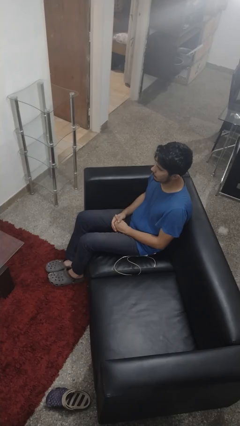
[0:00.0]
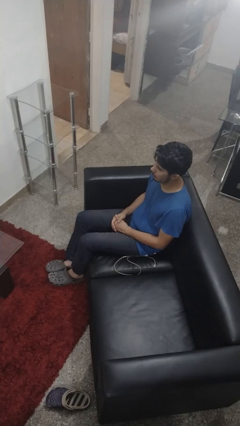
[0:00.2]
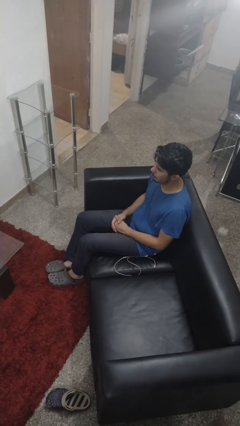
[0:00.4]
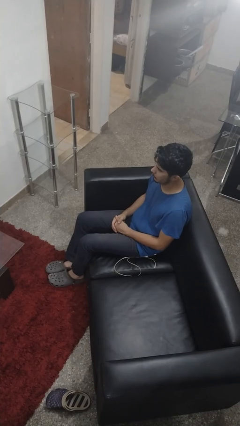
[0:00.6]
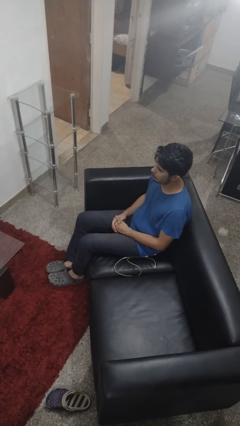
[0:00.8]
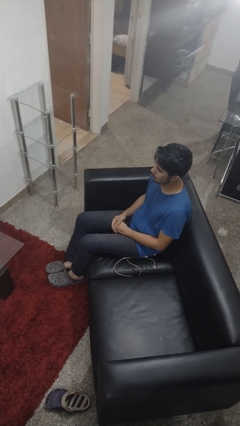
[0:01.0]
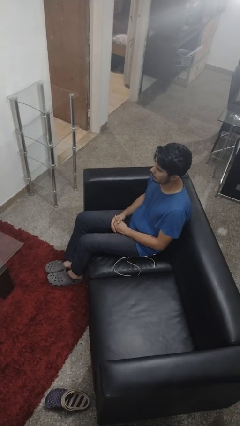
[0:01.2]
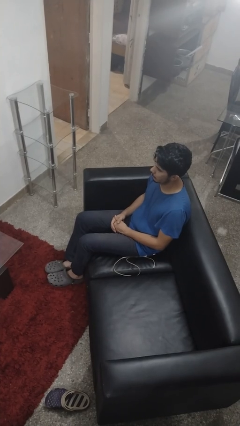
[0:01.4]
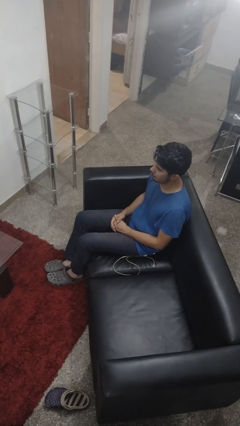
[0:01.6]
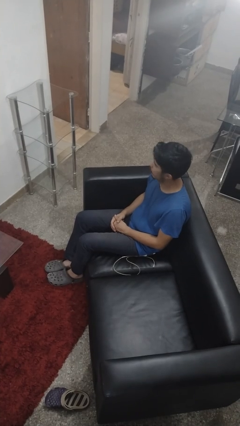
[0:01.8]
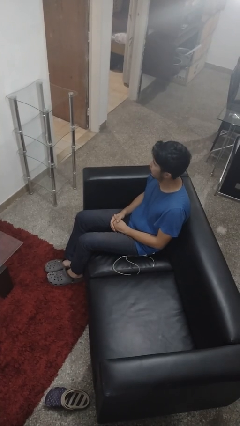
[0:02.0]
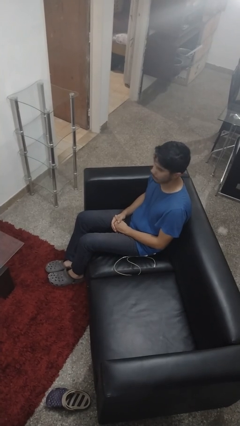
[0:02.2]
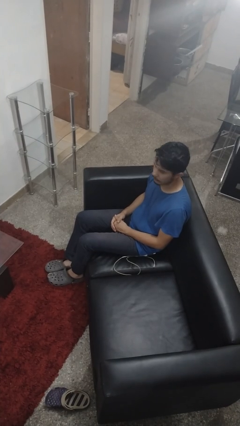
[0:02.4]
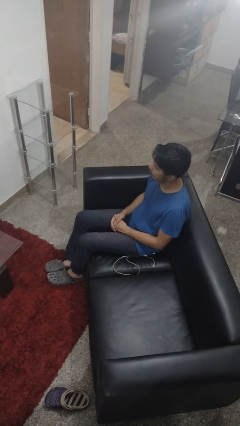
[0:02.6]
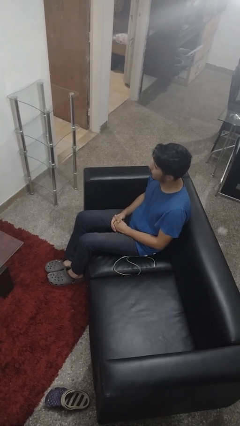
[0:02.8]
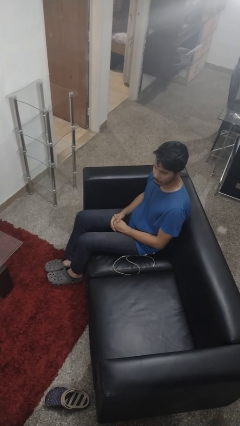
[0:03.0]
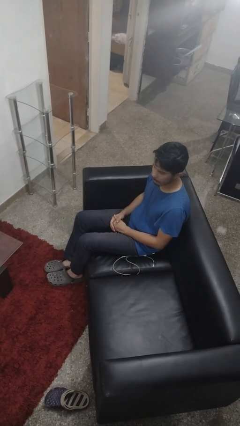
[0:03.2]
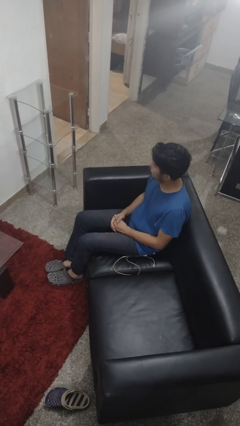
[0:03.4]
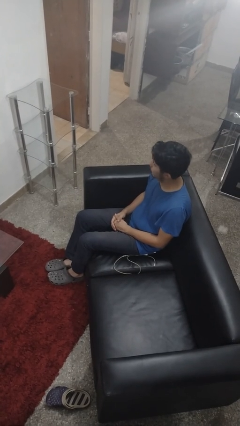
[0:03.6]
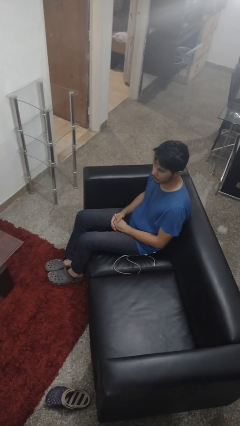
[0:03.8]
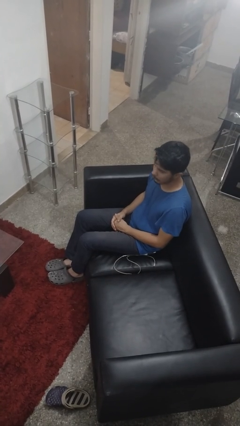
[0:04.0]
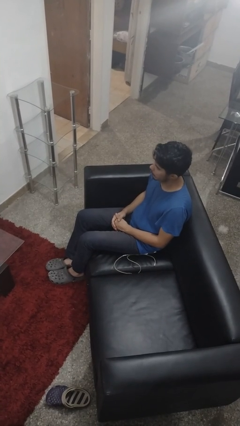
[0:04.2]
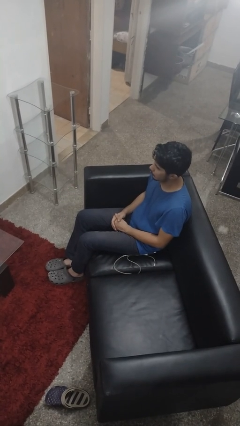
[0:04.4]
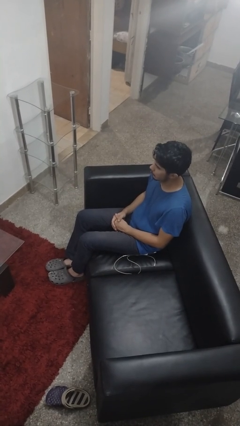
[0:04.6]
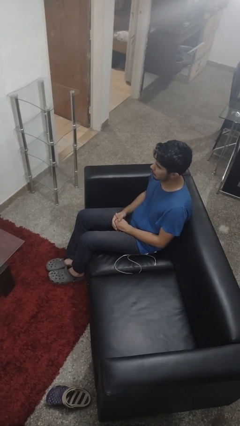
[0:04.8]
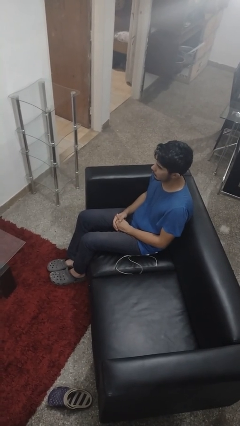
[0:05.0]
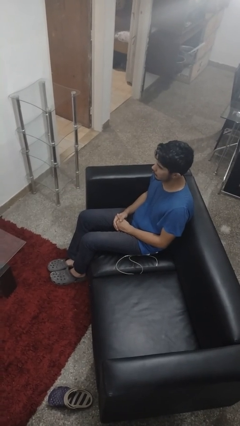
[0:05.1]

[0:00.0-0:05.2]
person shakes head

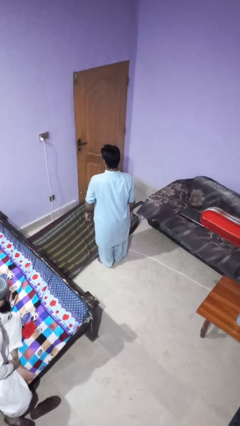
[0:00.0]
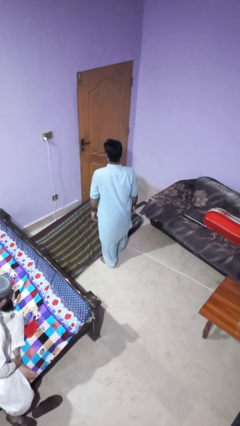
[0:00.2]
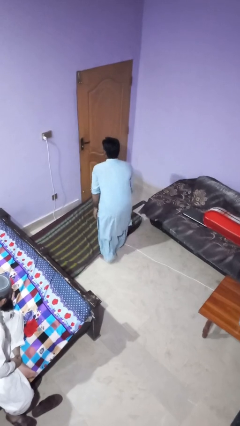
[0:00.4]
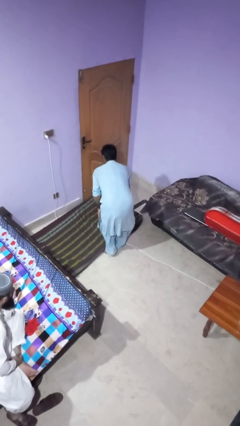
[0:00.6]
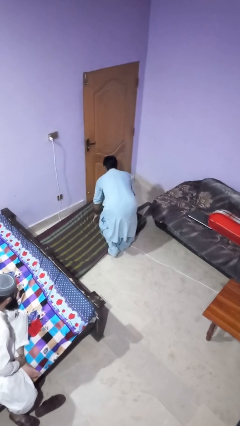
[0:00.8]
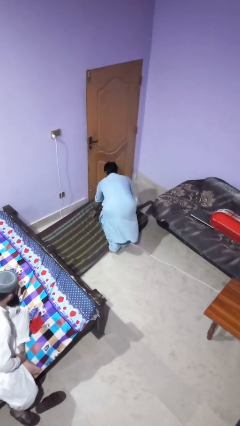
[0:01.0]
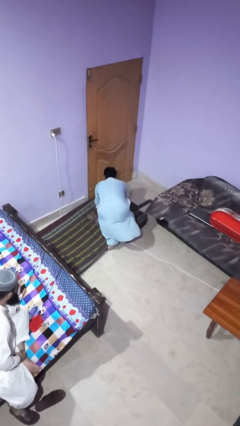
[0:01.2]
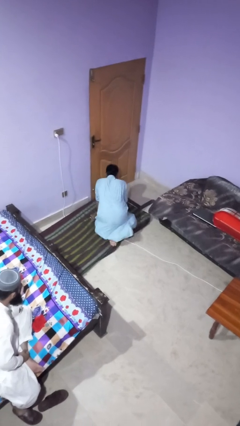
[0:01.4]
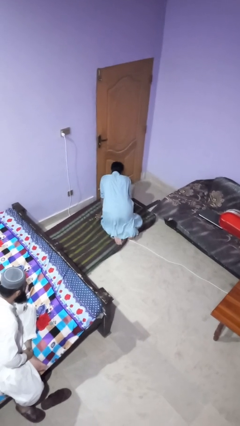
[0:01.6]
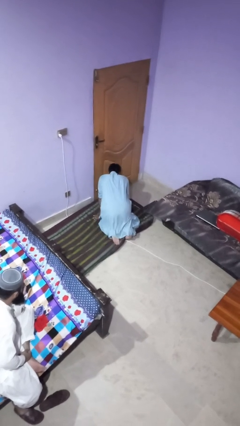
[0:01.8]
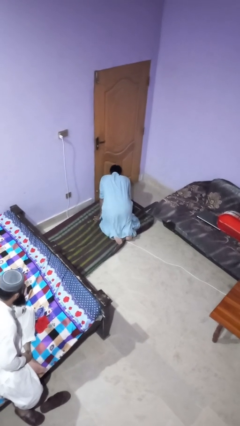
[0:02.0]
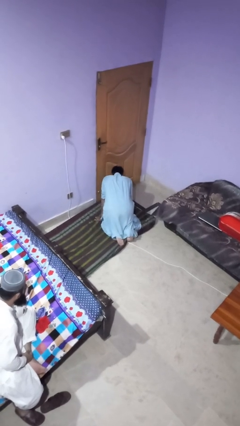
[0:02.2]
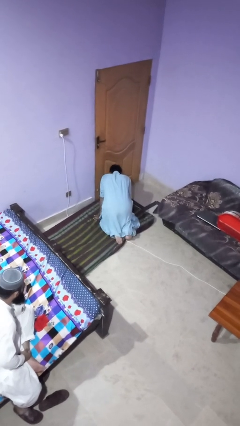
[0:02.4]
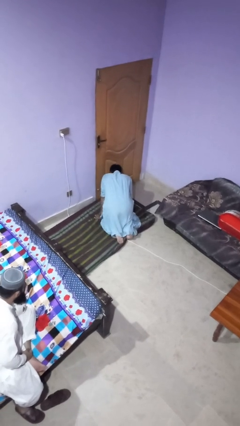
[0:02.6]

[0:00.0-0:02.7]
person trips on object on floor

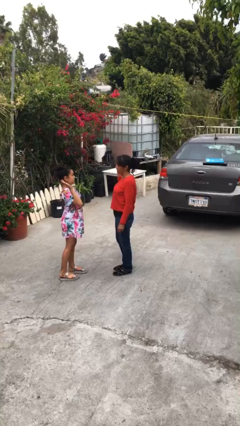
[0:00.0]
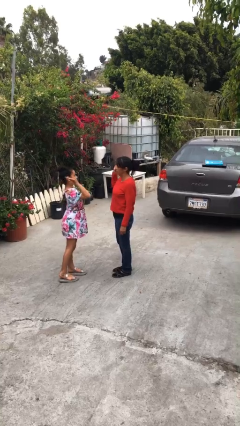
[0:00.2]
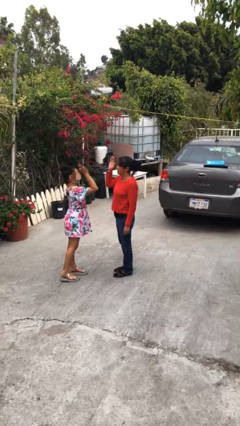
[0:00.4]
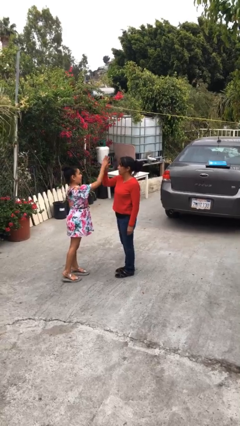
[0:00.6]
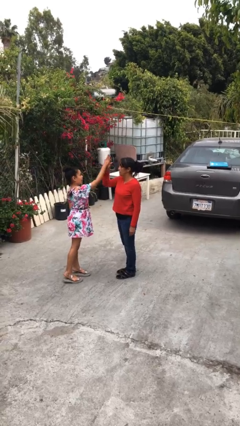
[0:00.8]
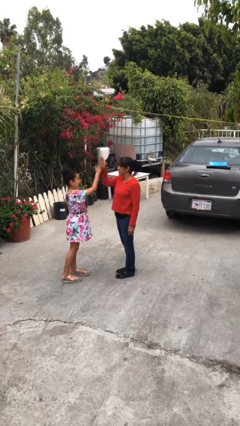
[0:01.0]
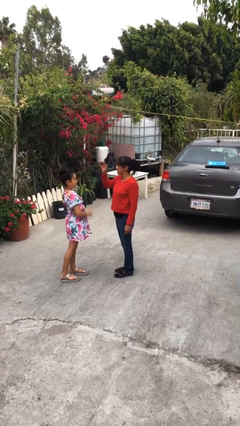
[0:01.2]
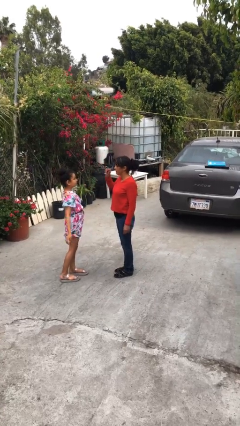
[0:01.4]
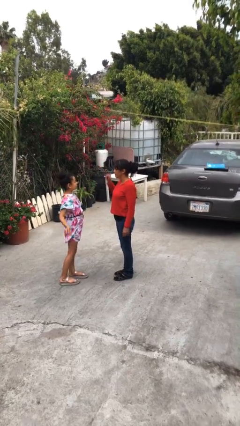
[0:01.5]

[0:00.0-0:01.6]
person highfives hand

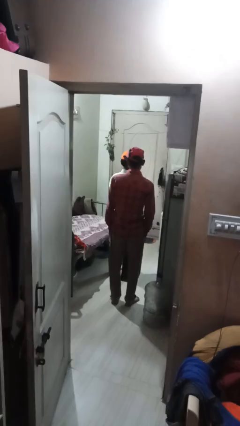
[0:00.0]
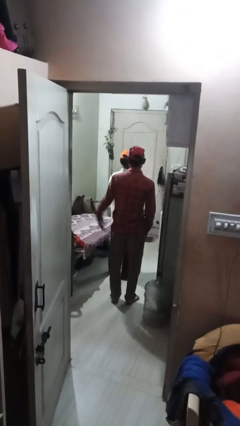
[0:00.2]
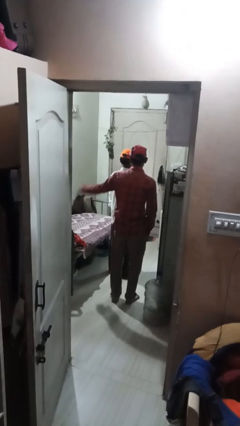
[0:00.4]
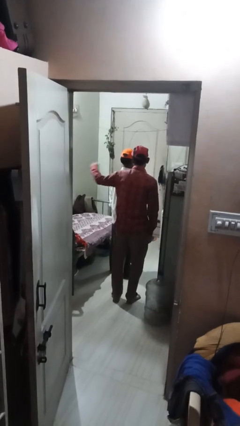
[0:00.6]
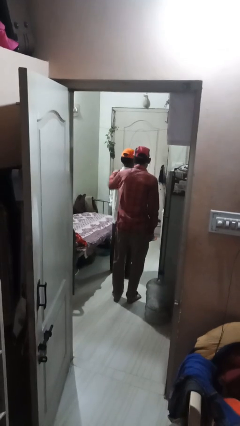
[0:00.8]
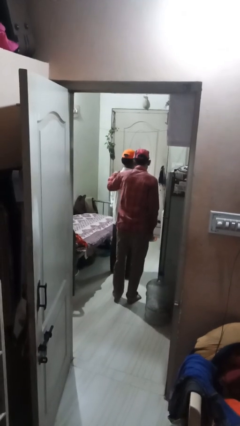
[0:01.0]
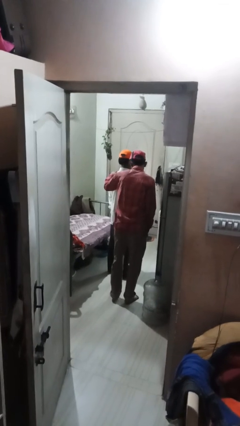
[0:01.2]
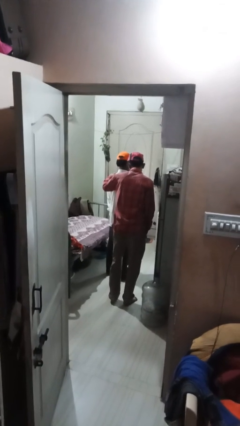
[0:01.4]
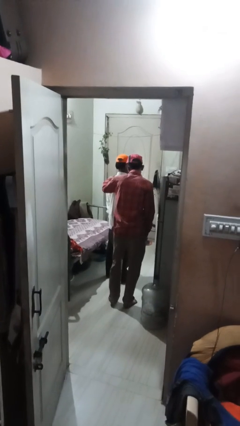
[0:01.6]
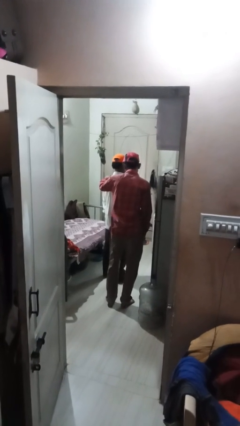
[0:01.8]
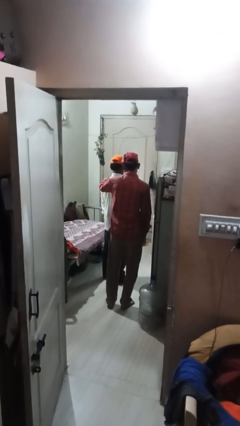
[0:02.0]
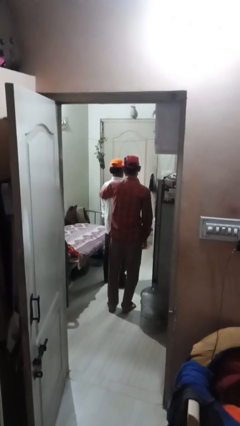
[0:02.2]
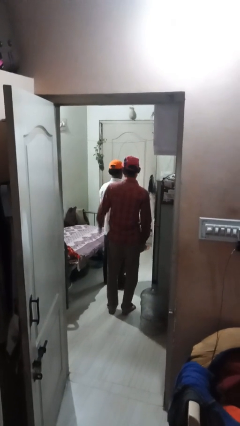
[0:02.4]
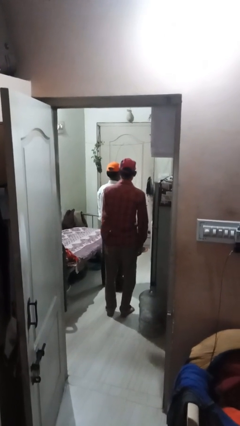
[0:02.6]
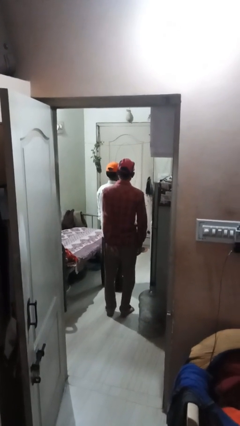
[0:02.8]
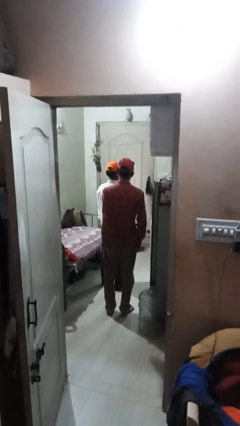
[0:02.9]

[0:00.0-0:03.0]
person touches back of person

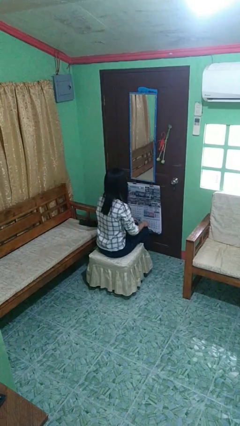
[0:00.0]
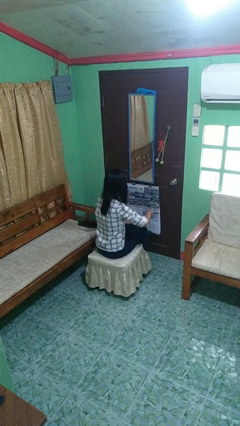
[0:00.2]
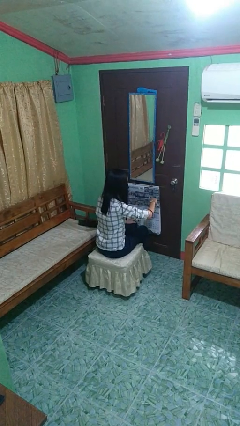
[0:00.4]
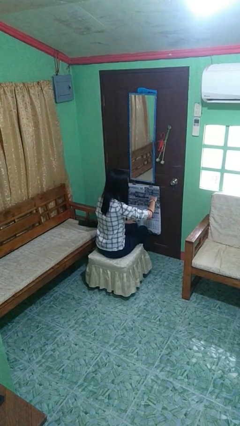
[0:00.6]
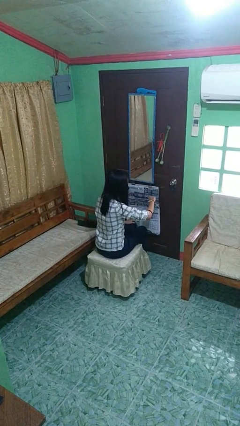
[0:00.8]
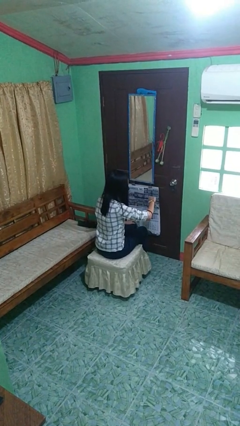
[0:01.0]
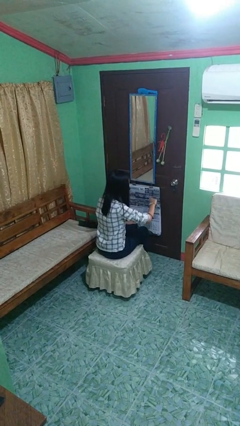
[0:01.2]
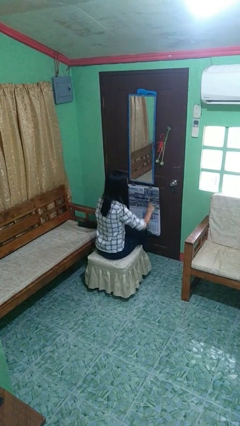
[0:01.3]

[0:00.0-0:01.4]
person looks at wristwatch

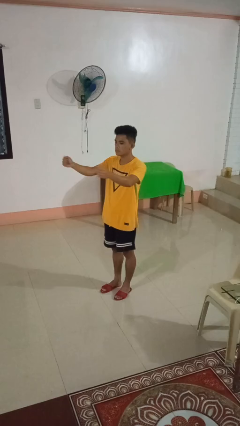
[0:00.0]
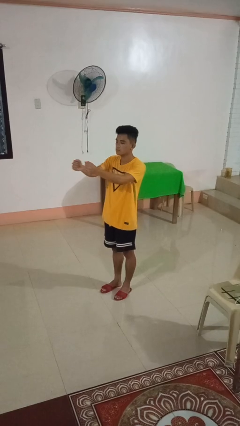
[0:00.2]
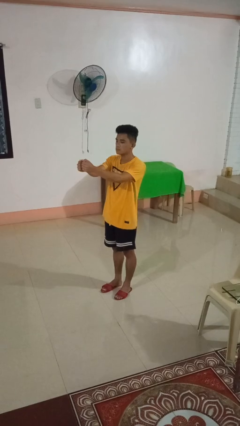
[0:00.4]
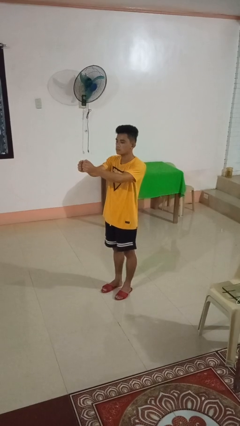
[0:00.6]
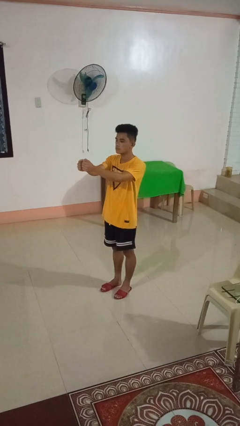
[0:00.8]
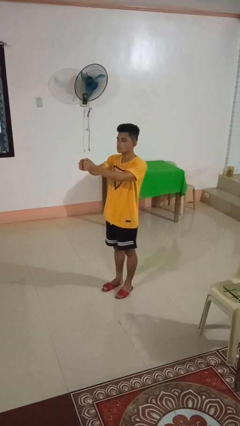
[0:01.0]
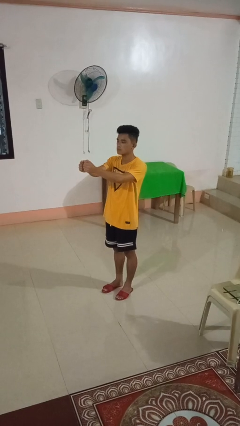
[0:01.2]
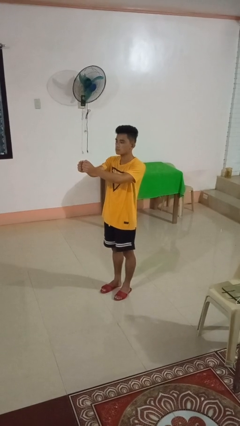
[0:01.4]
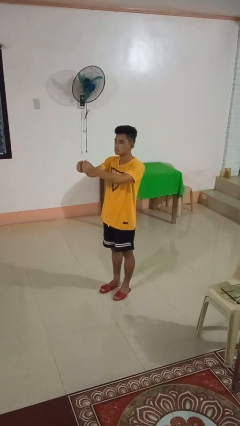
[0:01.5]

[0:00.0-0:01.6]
person gestures zoom in

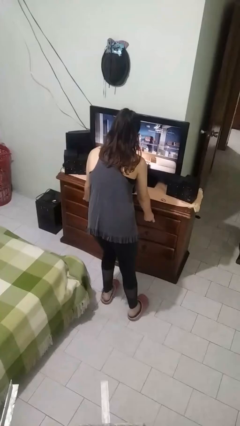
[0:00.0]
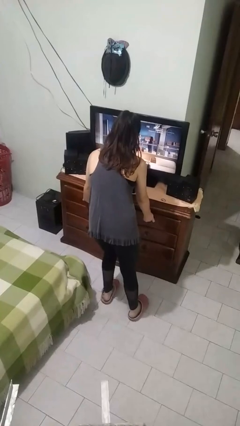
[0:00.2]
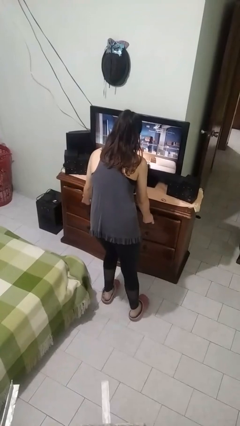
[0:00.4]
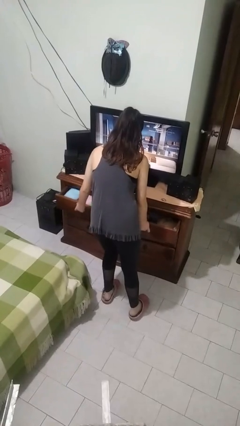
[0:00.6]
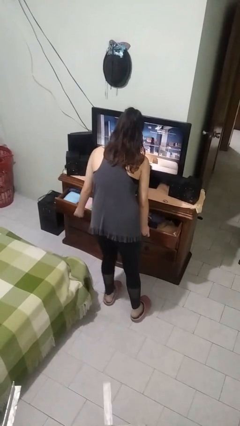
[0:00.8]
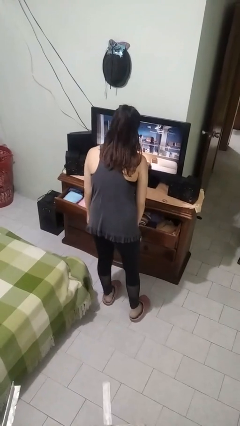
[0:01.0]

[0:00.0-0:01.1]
person opens dresser drawer

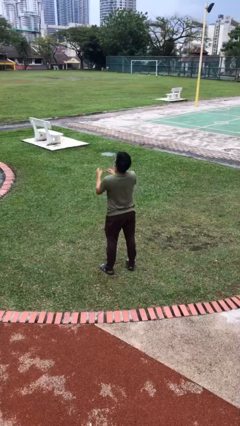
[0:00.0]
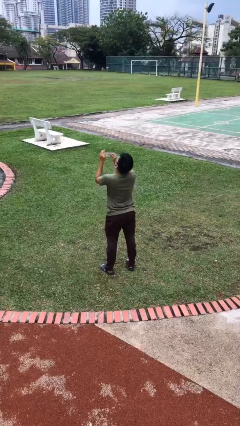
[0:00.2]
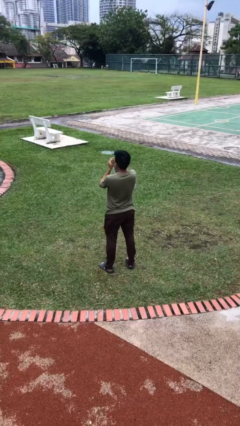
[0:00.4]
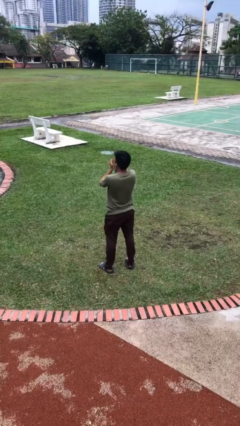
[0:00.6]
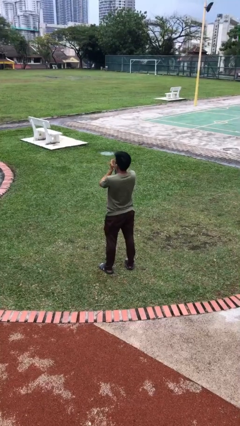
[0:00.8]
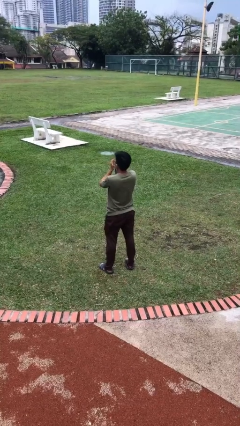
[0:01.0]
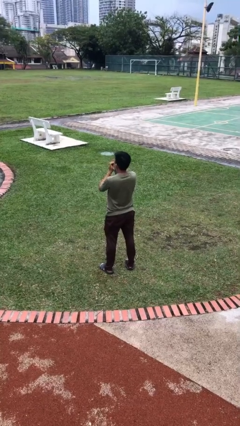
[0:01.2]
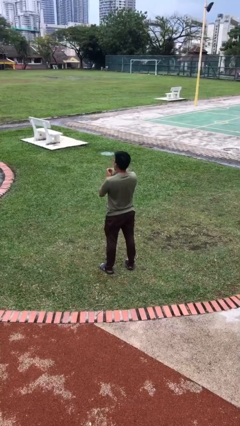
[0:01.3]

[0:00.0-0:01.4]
person sneezes into hand
